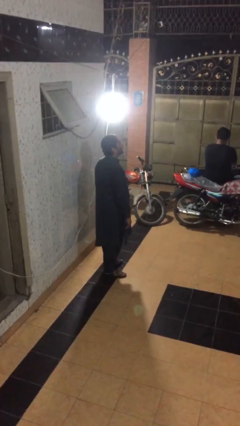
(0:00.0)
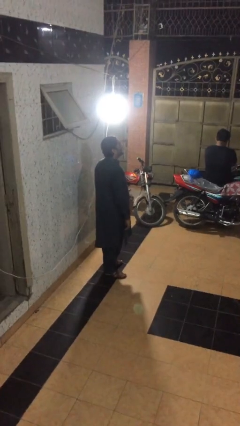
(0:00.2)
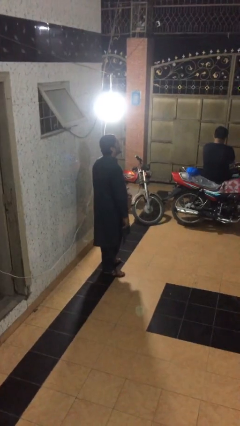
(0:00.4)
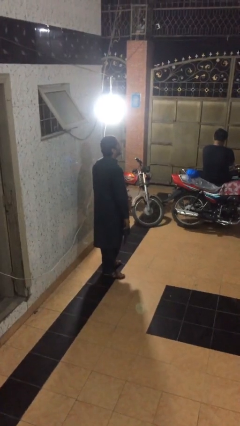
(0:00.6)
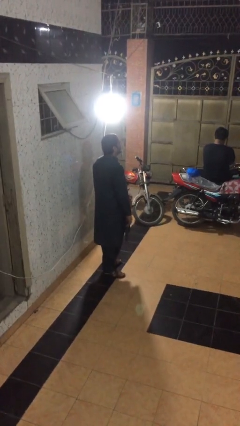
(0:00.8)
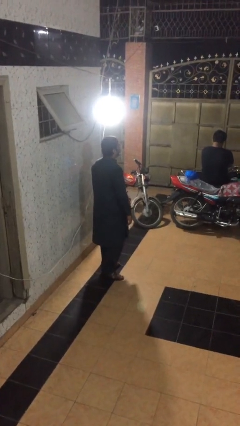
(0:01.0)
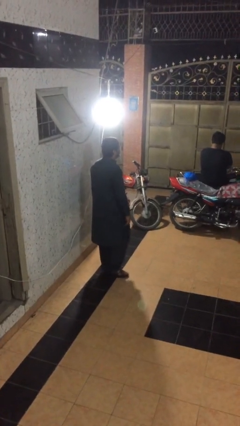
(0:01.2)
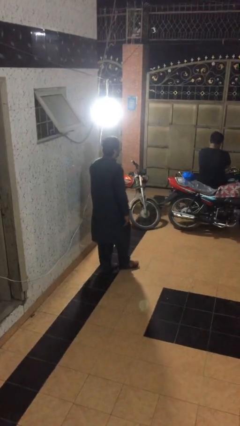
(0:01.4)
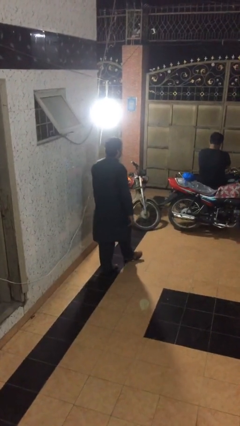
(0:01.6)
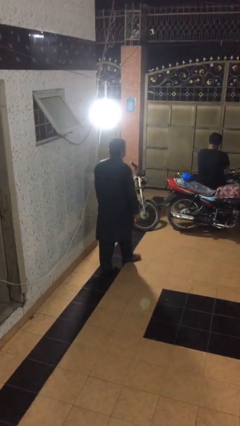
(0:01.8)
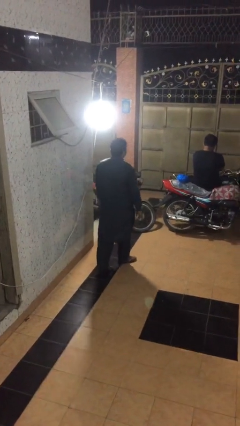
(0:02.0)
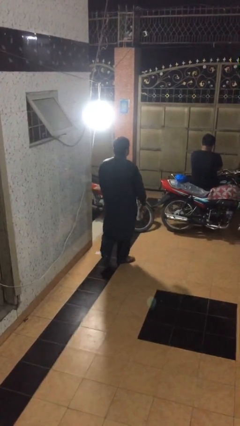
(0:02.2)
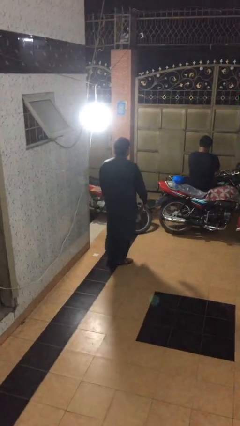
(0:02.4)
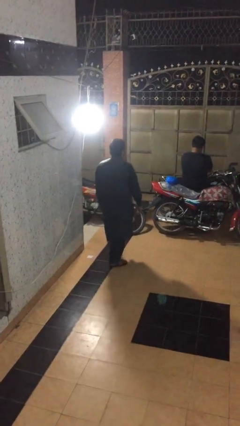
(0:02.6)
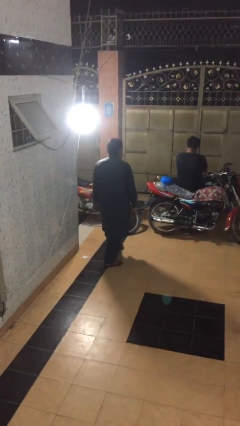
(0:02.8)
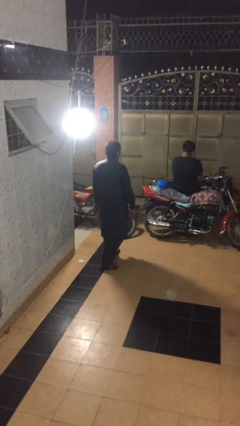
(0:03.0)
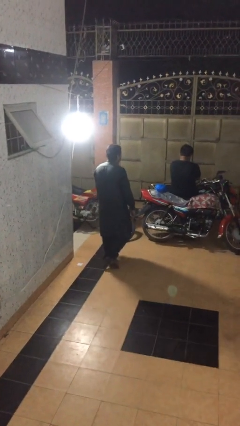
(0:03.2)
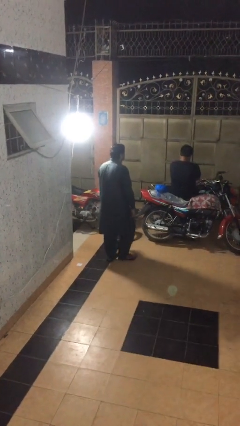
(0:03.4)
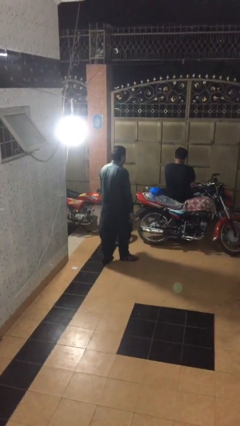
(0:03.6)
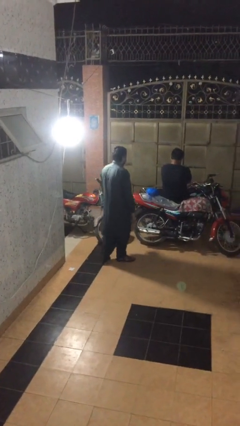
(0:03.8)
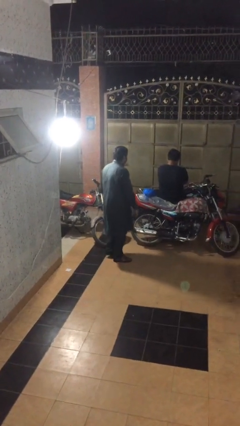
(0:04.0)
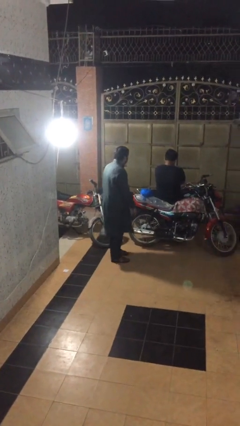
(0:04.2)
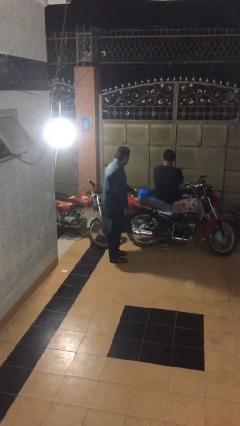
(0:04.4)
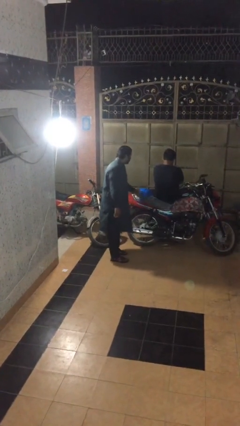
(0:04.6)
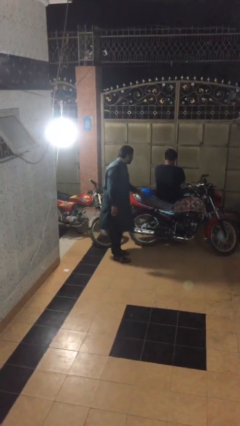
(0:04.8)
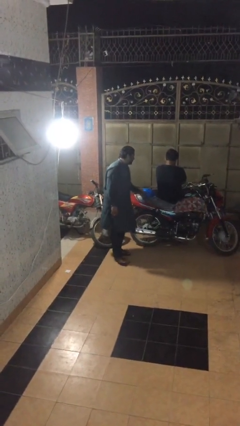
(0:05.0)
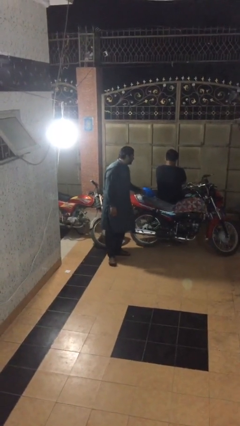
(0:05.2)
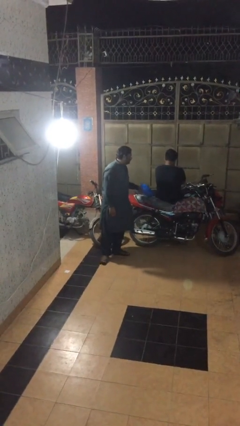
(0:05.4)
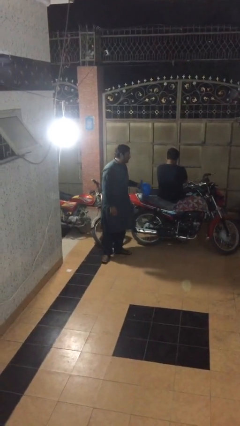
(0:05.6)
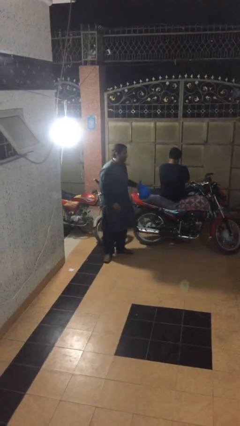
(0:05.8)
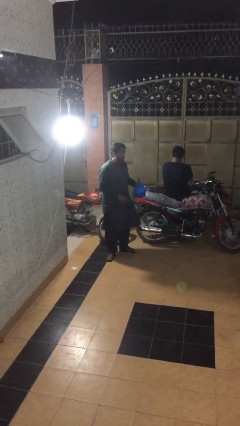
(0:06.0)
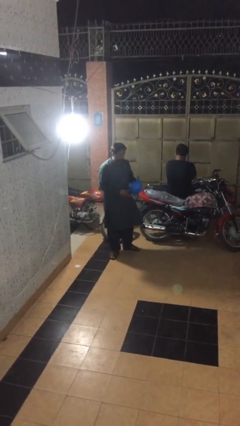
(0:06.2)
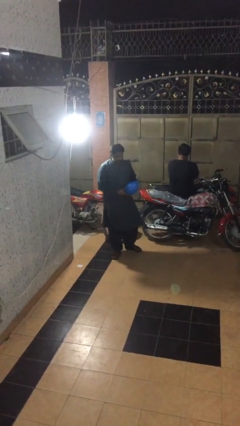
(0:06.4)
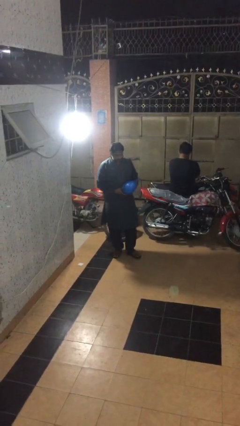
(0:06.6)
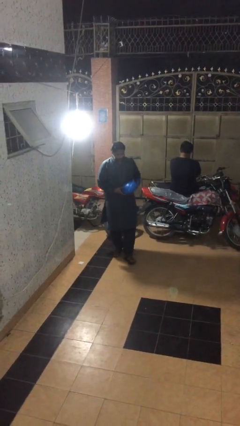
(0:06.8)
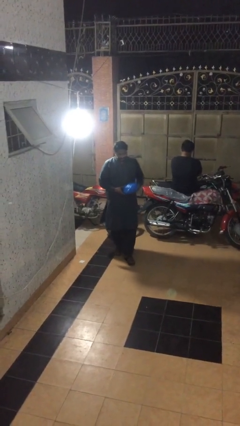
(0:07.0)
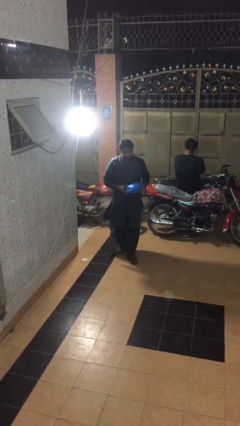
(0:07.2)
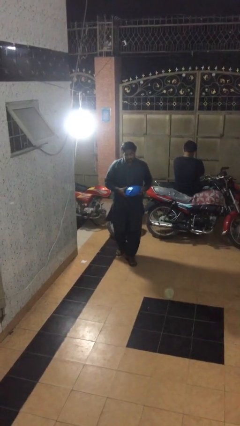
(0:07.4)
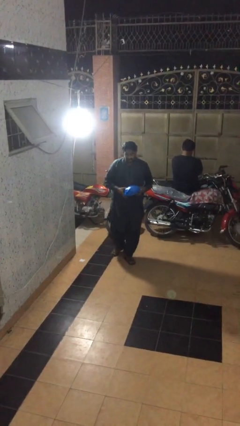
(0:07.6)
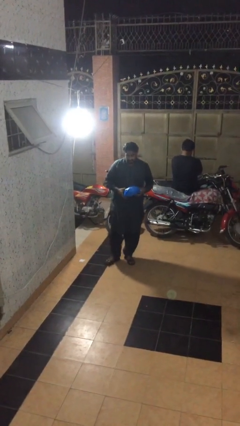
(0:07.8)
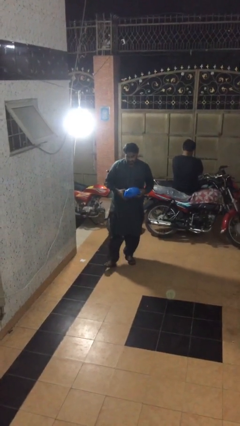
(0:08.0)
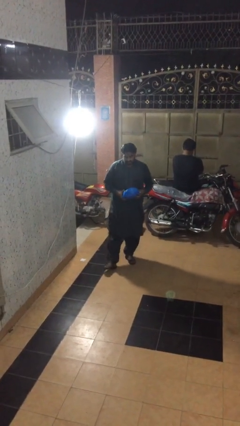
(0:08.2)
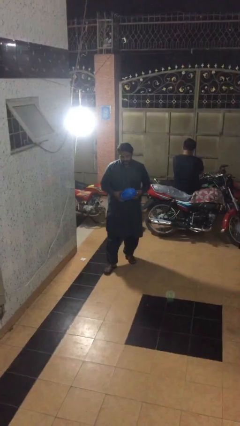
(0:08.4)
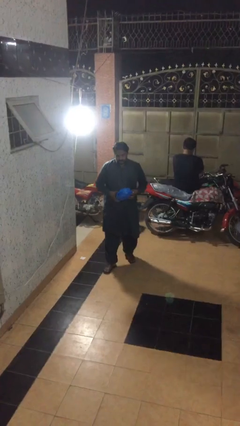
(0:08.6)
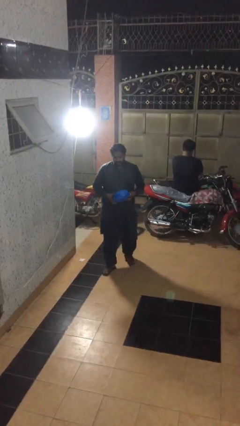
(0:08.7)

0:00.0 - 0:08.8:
person steals object from person

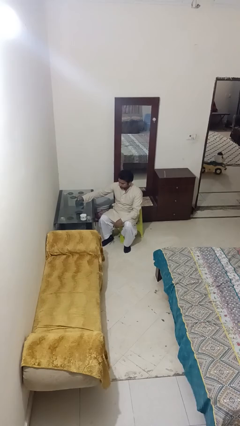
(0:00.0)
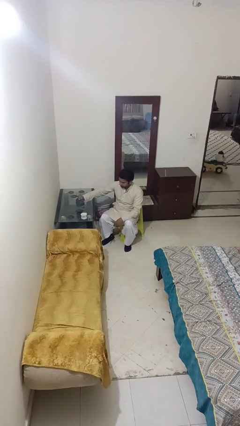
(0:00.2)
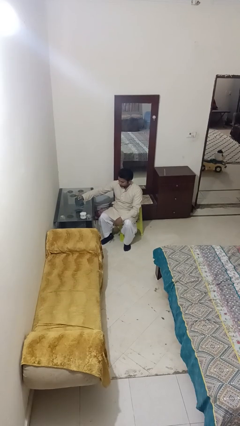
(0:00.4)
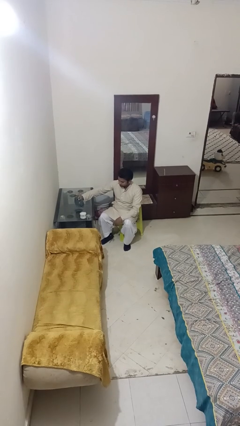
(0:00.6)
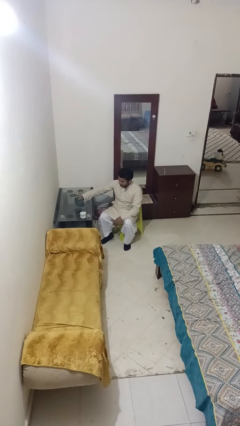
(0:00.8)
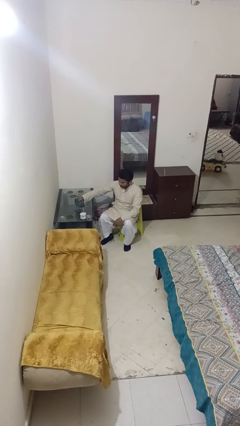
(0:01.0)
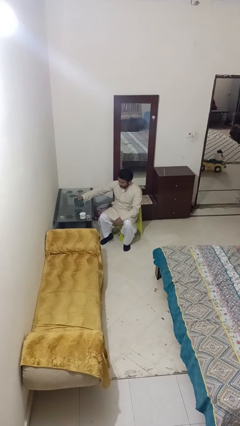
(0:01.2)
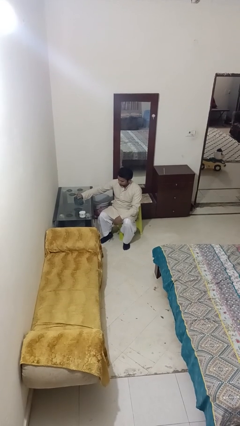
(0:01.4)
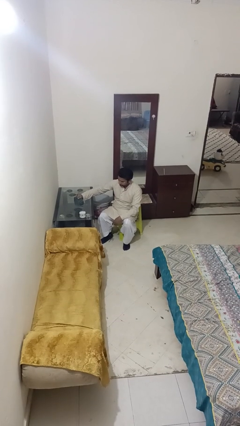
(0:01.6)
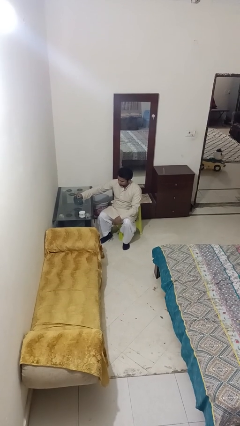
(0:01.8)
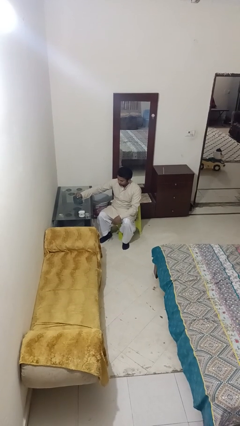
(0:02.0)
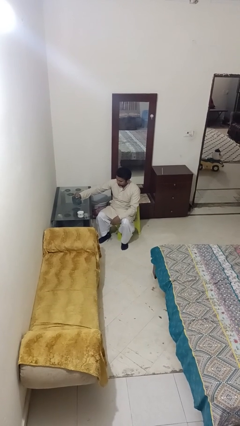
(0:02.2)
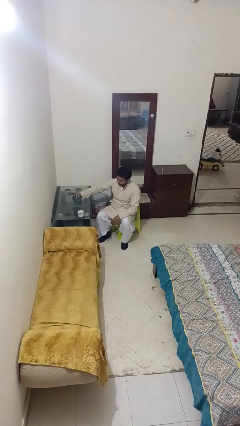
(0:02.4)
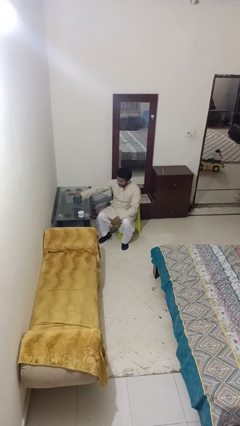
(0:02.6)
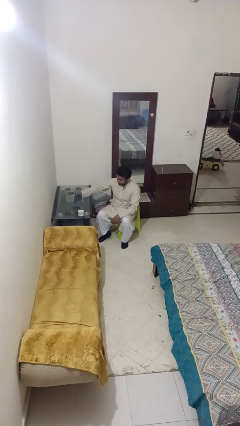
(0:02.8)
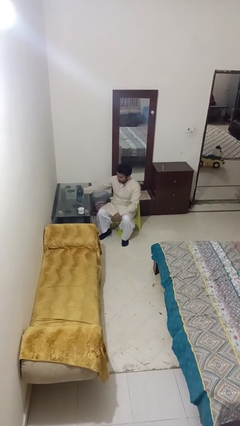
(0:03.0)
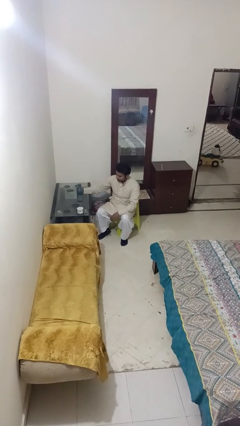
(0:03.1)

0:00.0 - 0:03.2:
person pours liquid into cup

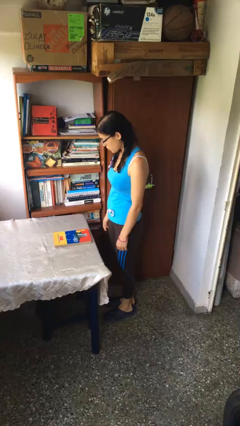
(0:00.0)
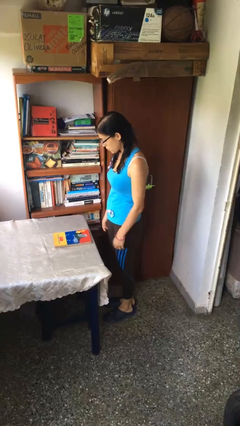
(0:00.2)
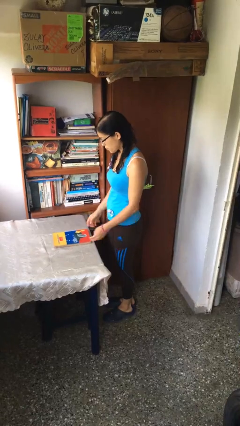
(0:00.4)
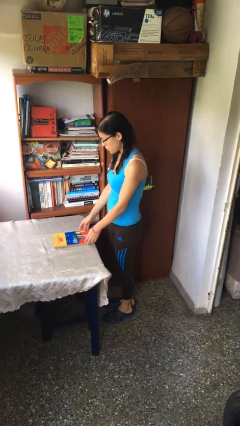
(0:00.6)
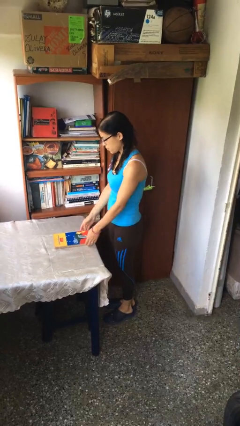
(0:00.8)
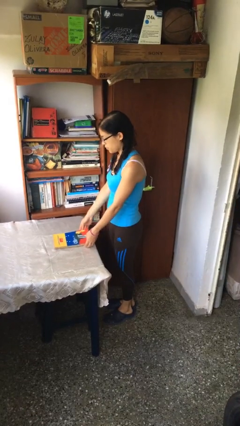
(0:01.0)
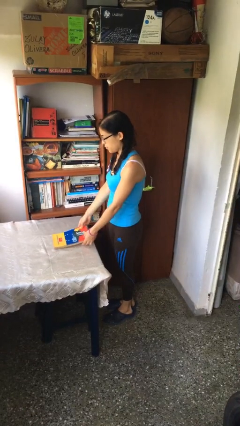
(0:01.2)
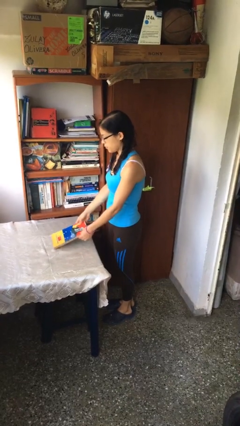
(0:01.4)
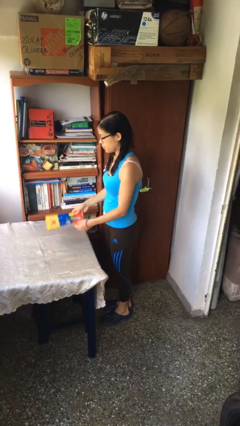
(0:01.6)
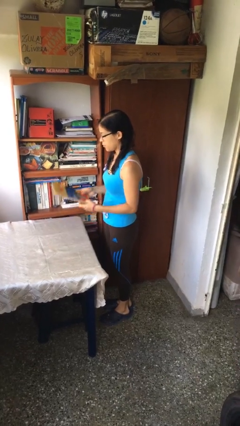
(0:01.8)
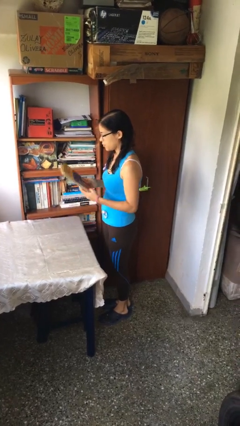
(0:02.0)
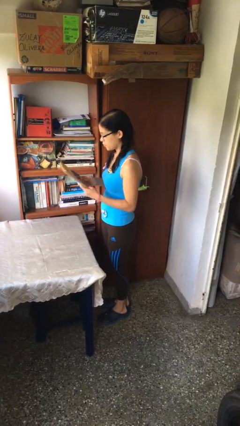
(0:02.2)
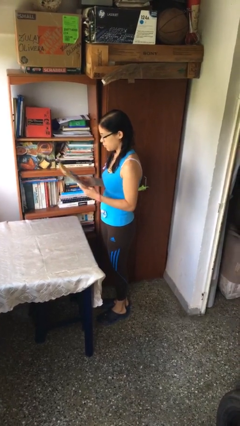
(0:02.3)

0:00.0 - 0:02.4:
person picks up object from table

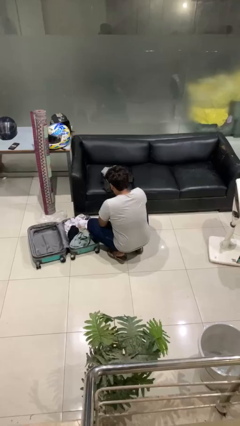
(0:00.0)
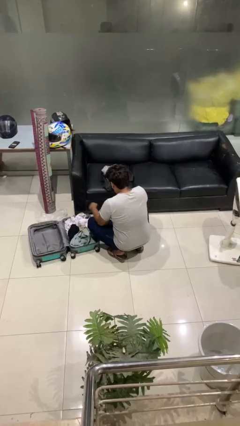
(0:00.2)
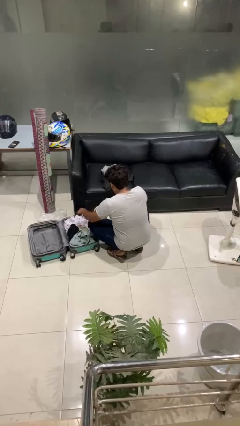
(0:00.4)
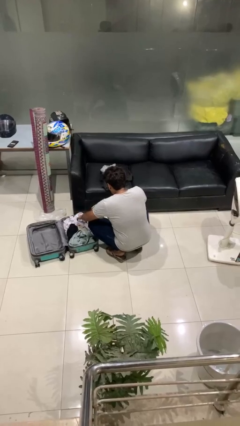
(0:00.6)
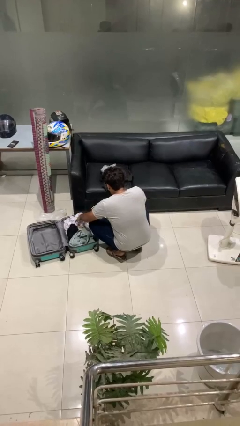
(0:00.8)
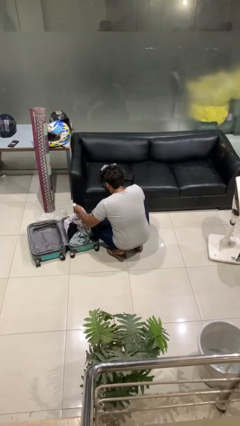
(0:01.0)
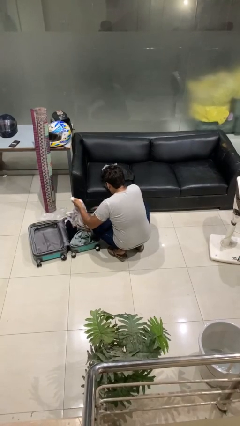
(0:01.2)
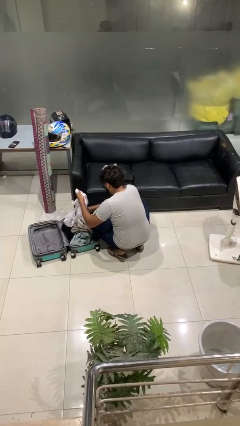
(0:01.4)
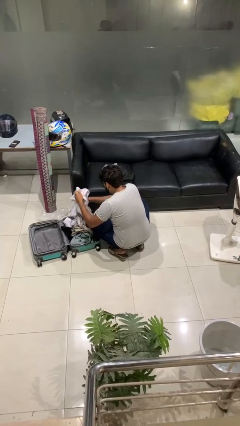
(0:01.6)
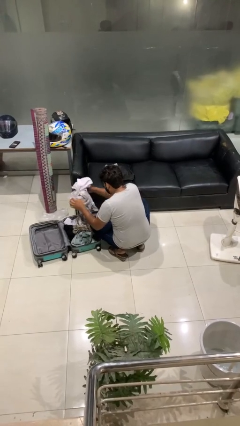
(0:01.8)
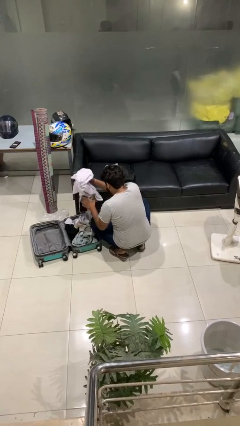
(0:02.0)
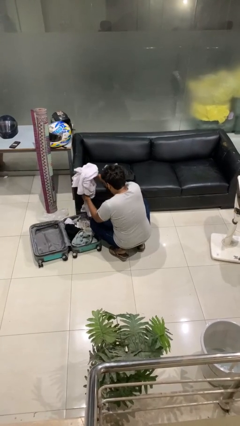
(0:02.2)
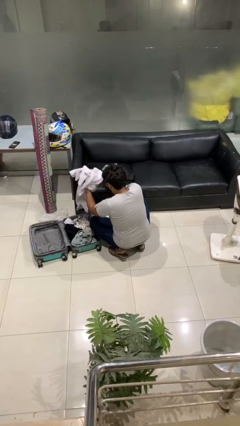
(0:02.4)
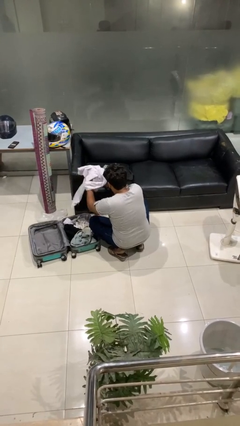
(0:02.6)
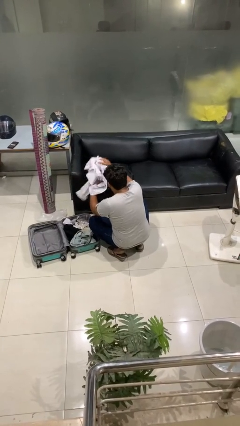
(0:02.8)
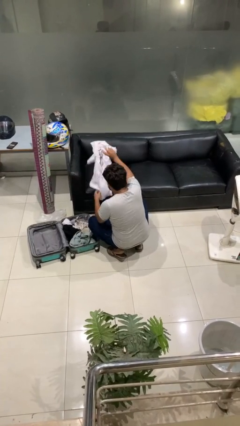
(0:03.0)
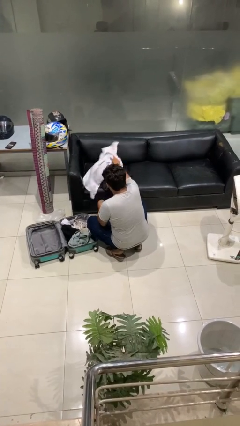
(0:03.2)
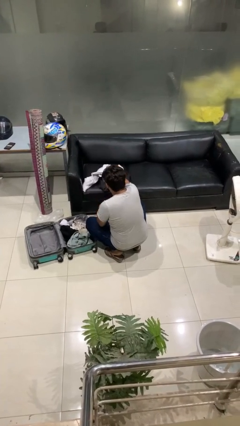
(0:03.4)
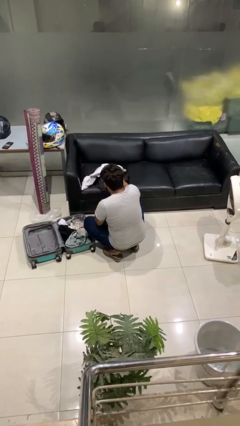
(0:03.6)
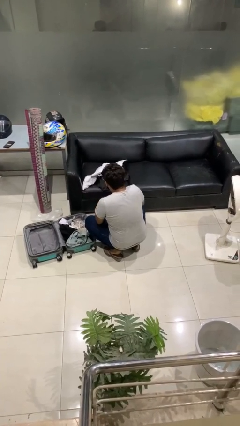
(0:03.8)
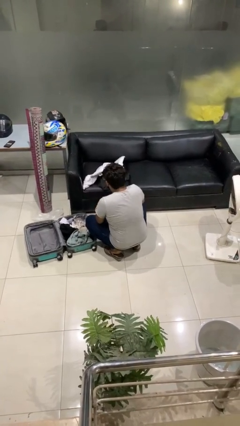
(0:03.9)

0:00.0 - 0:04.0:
person unloads clothes from suitcase
